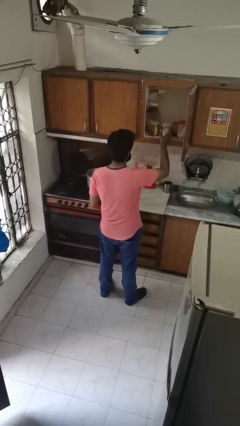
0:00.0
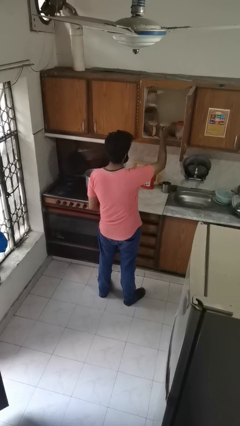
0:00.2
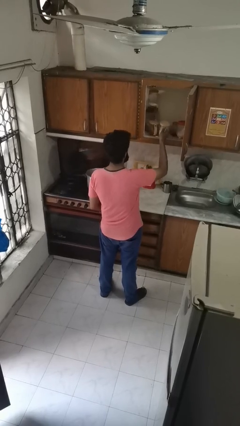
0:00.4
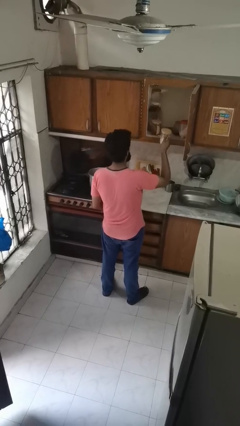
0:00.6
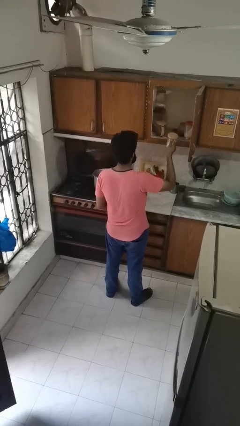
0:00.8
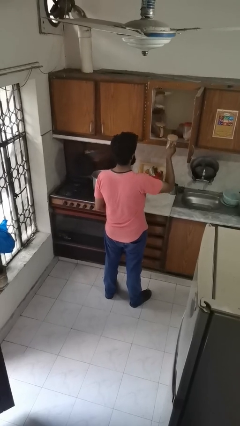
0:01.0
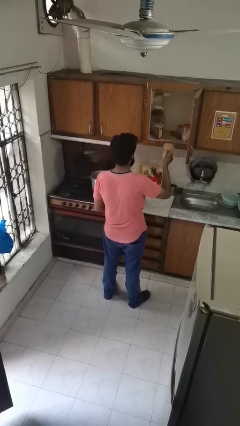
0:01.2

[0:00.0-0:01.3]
person picks up object from cabinet

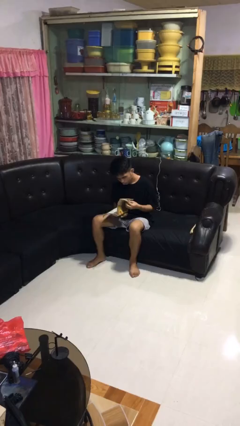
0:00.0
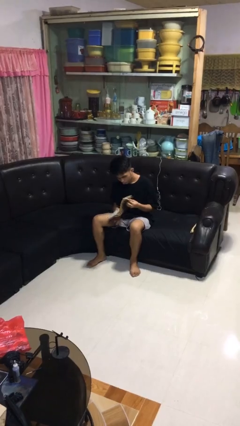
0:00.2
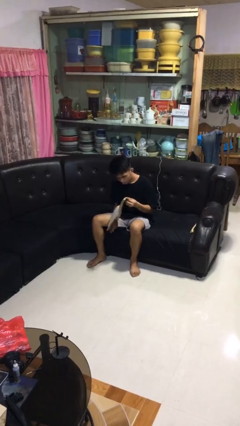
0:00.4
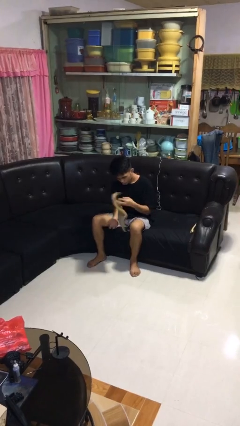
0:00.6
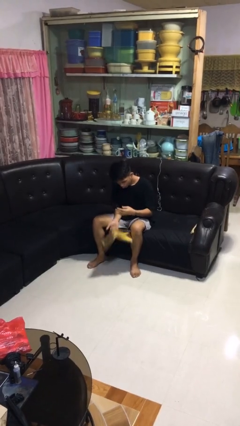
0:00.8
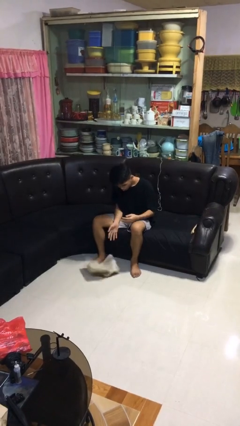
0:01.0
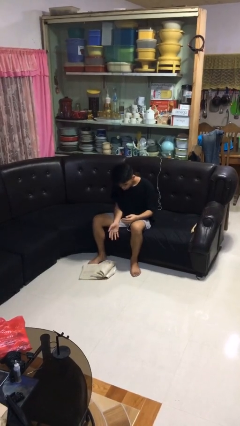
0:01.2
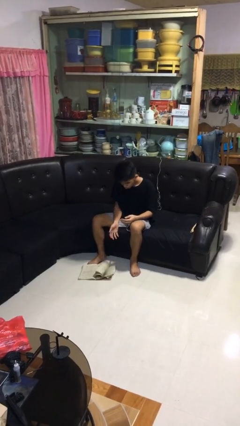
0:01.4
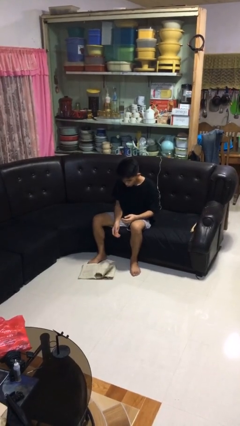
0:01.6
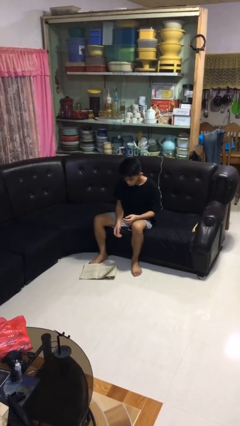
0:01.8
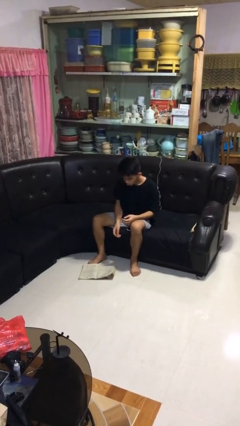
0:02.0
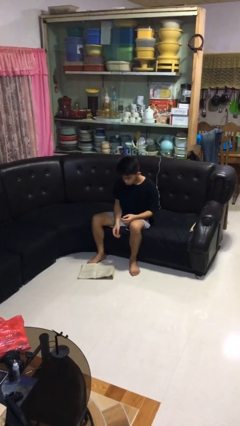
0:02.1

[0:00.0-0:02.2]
person drops object

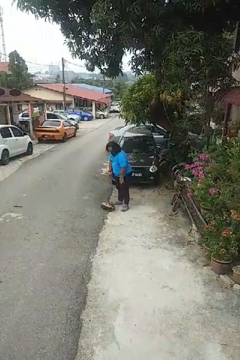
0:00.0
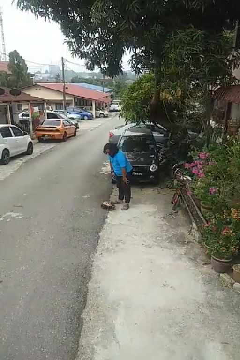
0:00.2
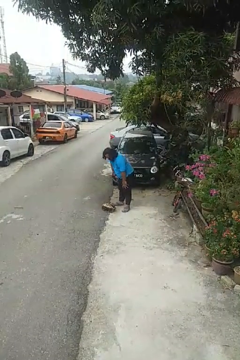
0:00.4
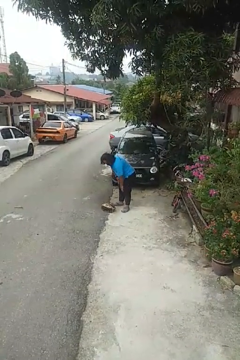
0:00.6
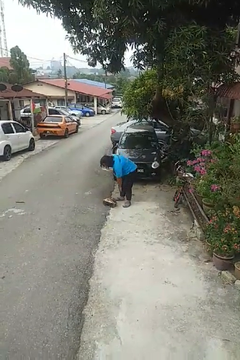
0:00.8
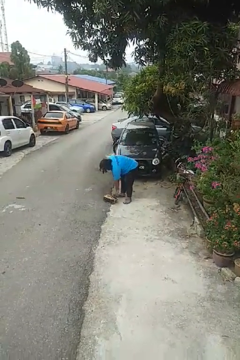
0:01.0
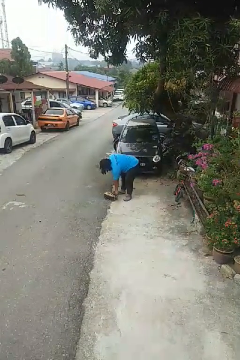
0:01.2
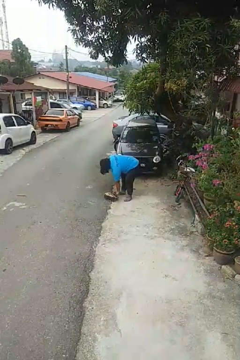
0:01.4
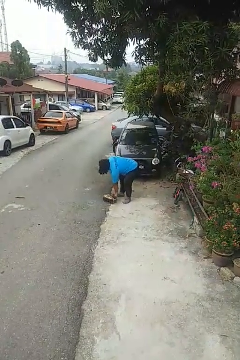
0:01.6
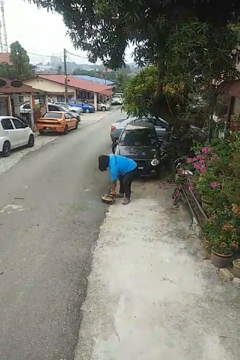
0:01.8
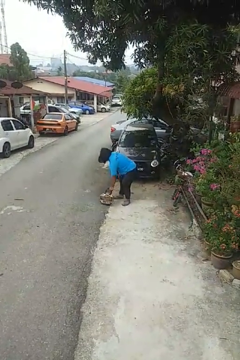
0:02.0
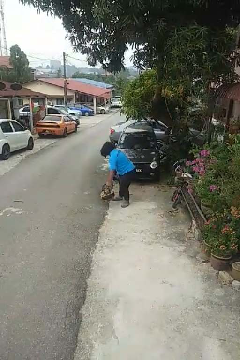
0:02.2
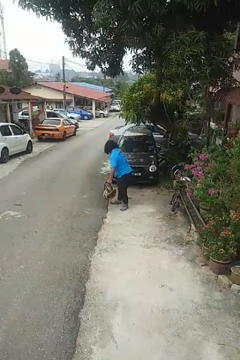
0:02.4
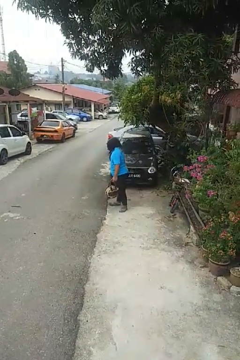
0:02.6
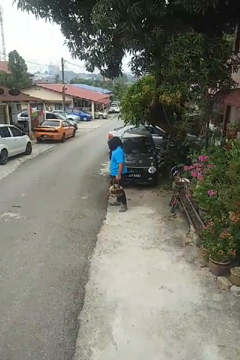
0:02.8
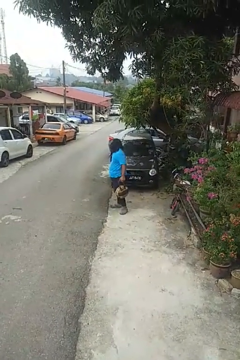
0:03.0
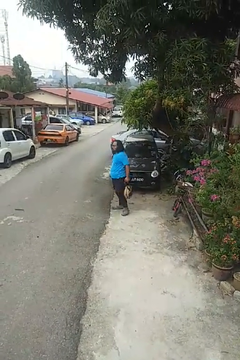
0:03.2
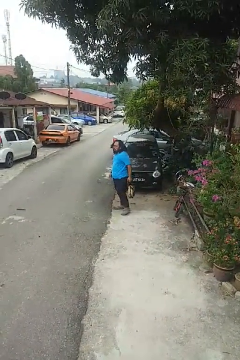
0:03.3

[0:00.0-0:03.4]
person picks up object from floor

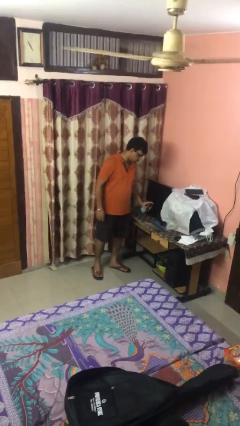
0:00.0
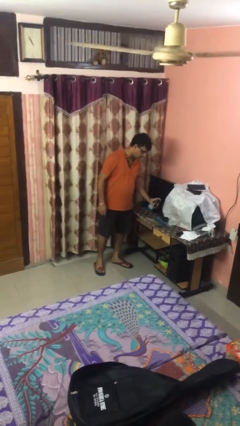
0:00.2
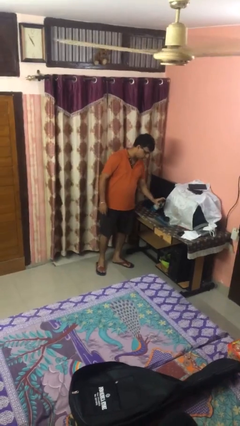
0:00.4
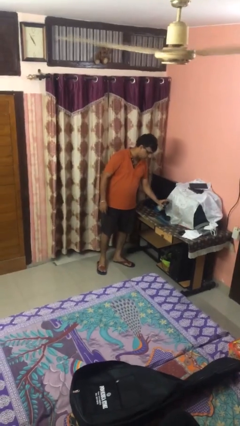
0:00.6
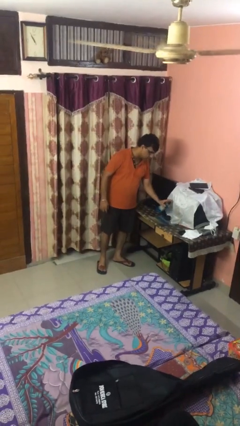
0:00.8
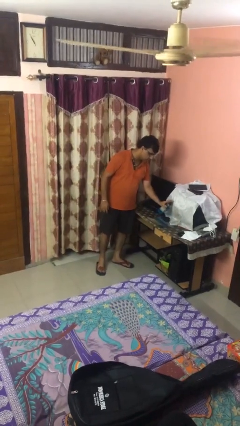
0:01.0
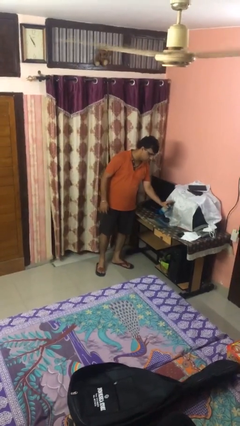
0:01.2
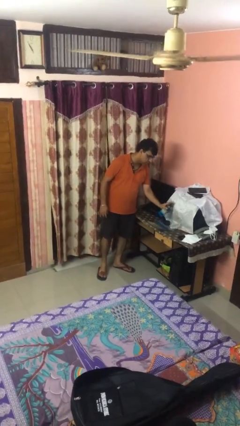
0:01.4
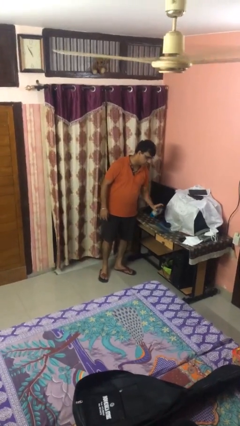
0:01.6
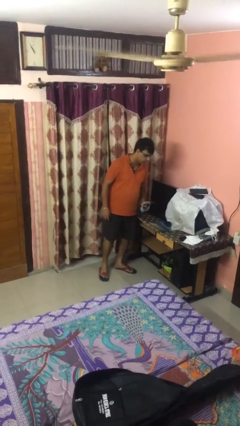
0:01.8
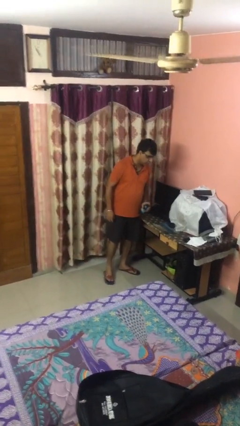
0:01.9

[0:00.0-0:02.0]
person sprays from bottle

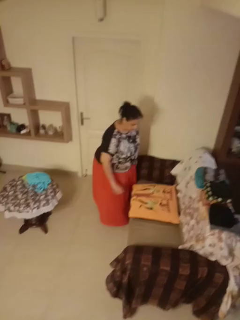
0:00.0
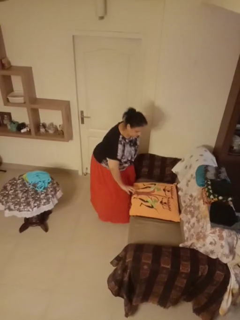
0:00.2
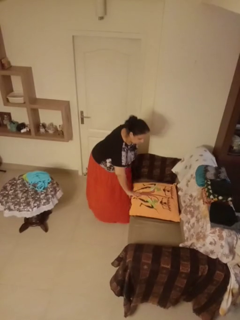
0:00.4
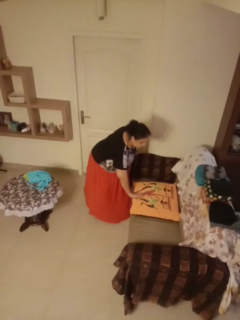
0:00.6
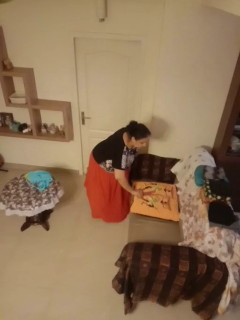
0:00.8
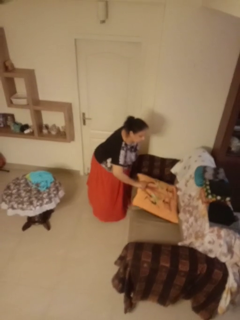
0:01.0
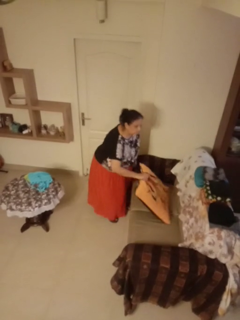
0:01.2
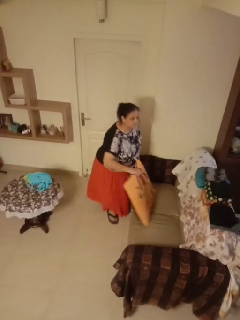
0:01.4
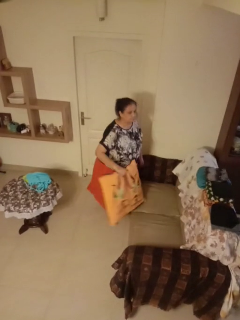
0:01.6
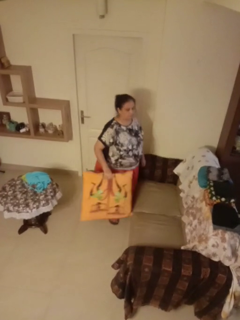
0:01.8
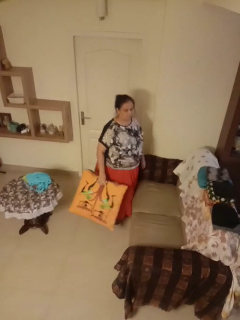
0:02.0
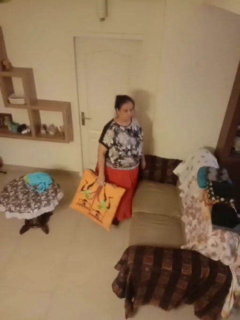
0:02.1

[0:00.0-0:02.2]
person picks up object from couch

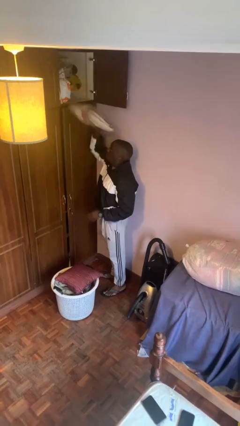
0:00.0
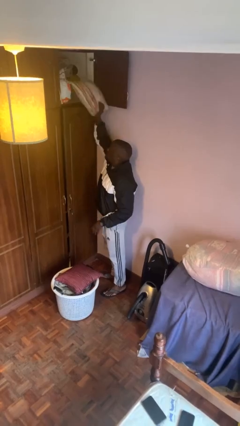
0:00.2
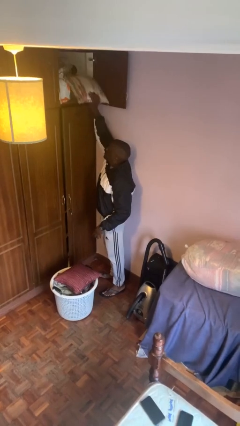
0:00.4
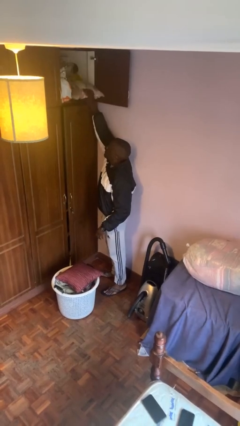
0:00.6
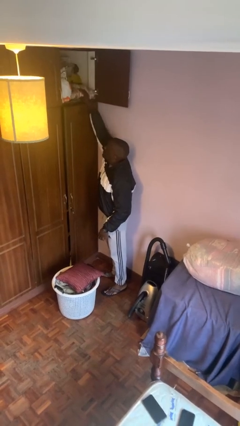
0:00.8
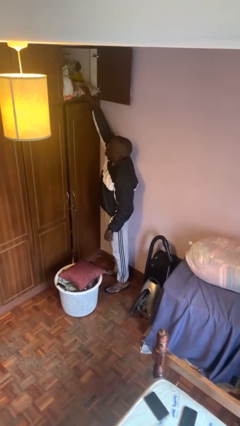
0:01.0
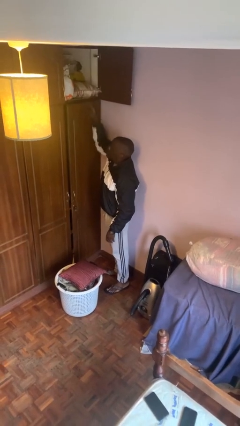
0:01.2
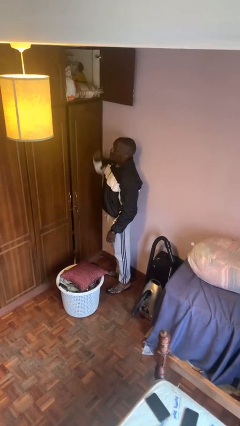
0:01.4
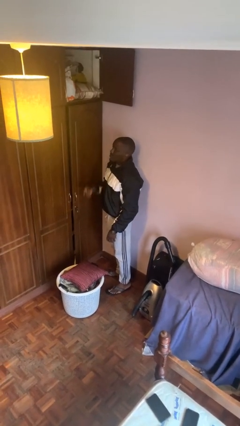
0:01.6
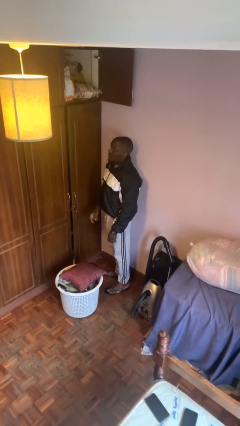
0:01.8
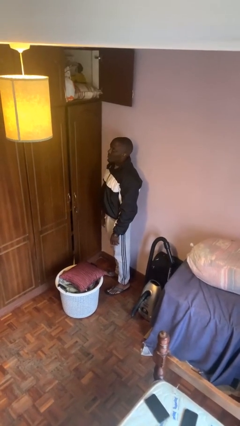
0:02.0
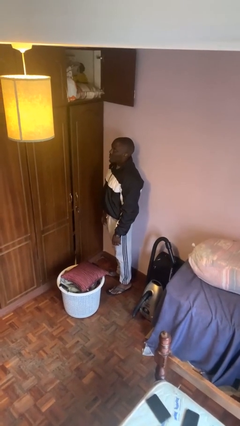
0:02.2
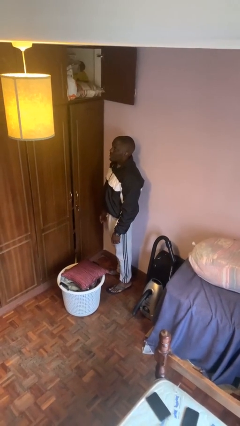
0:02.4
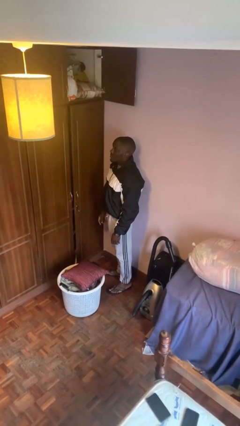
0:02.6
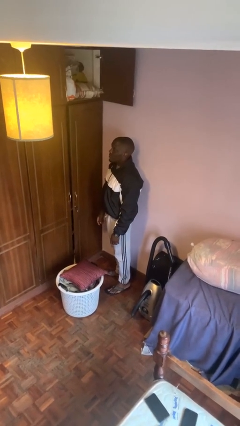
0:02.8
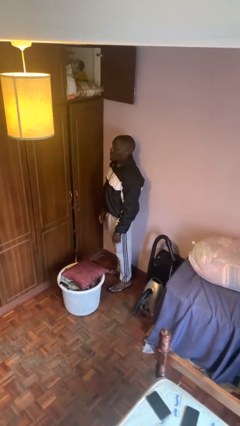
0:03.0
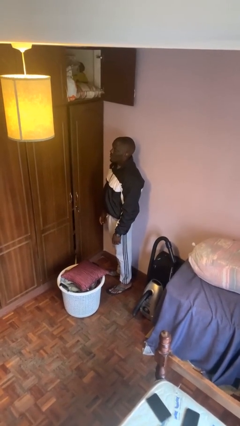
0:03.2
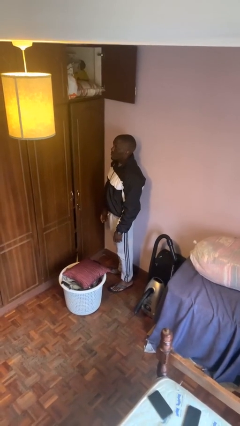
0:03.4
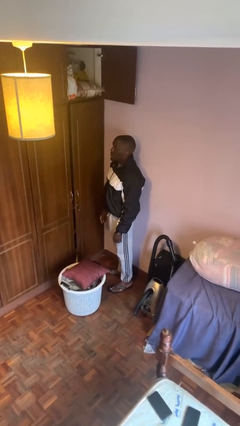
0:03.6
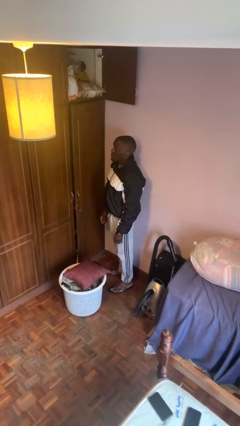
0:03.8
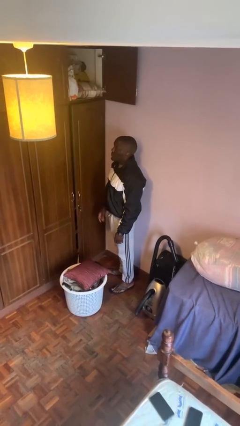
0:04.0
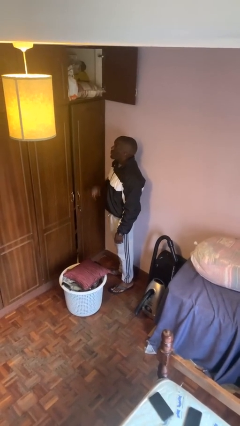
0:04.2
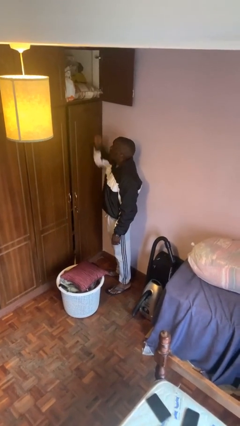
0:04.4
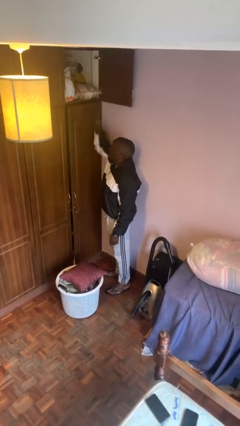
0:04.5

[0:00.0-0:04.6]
person puts down object on shelf

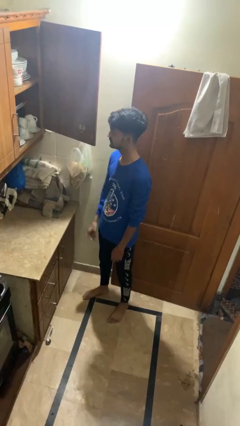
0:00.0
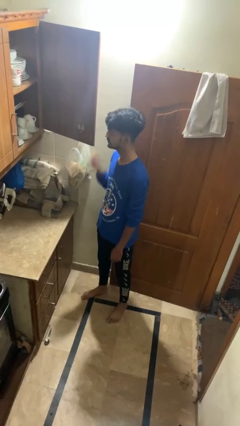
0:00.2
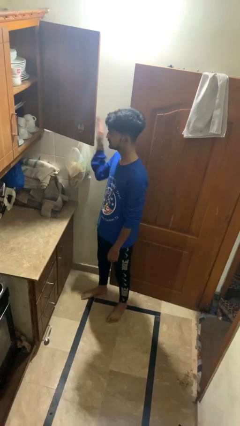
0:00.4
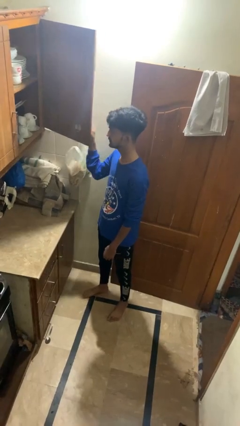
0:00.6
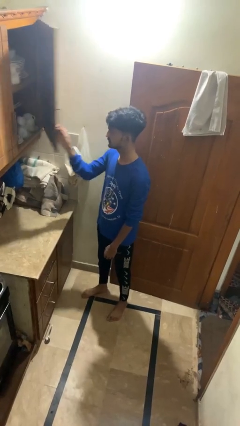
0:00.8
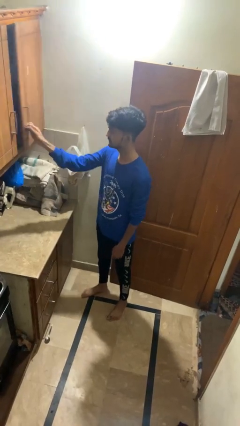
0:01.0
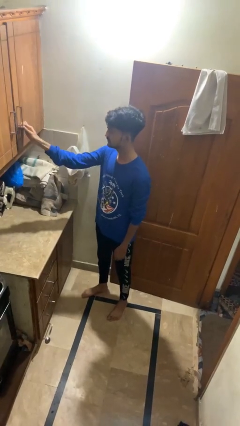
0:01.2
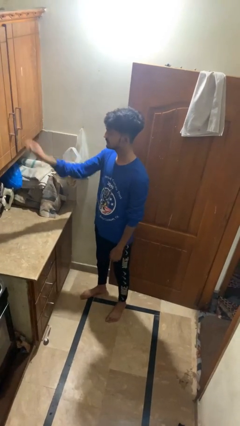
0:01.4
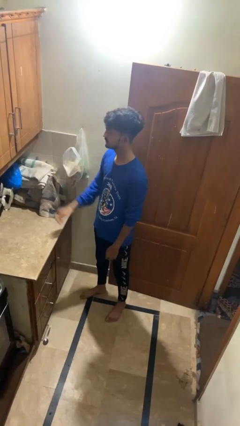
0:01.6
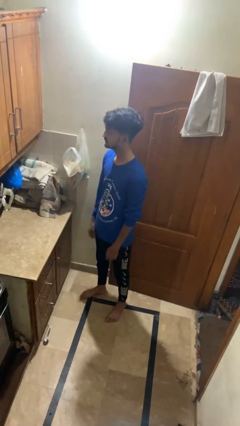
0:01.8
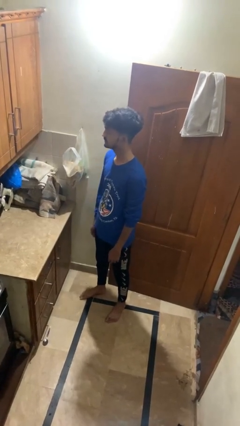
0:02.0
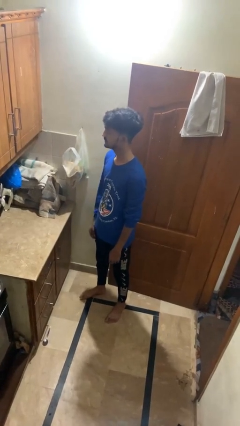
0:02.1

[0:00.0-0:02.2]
person closes cabinet
